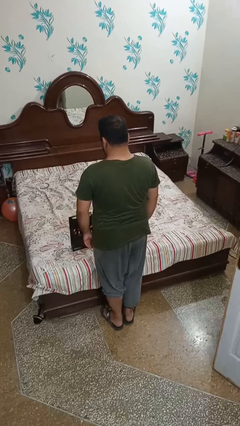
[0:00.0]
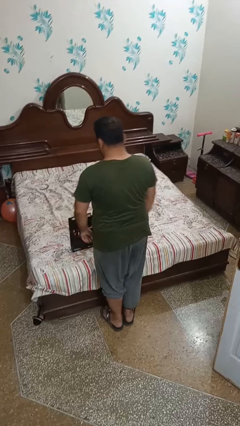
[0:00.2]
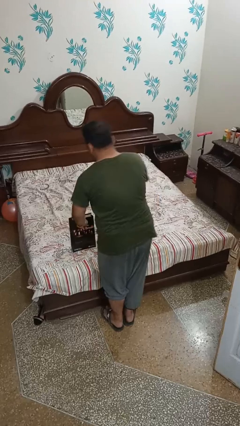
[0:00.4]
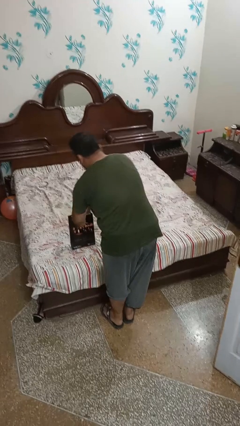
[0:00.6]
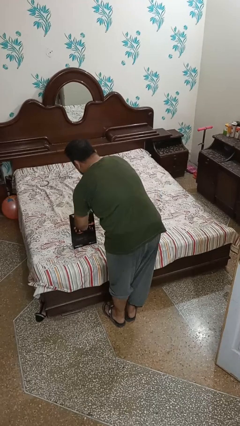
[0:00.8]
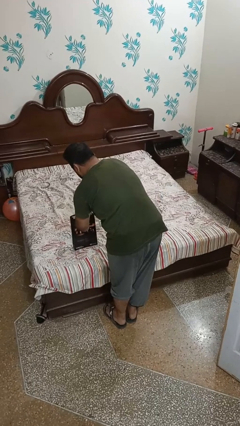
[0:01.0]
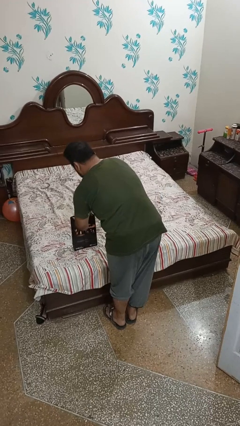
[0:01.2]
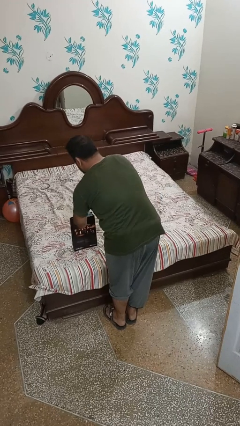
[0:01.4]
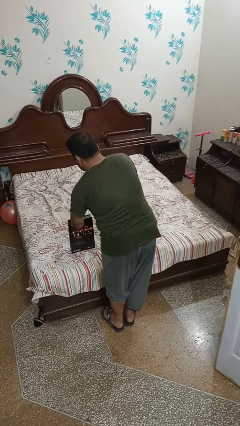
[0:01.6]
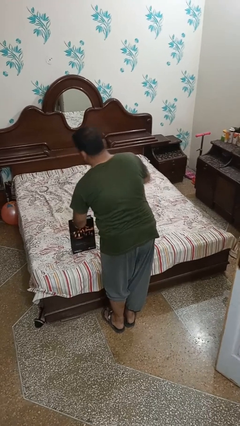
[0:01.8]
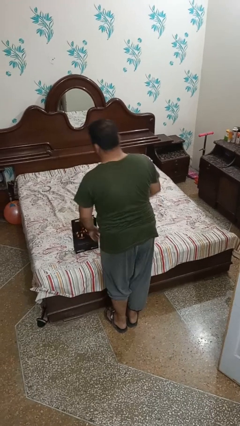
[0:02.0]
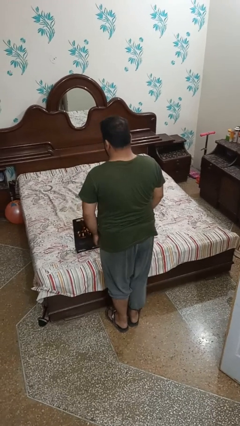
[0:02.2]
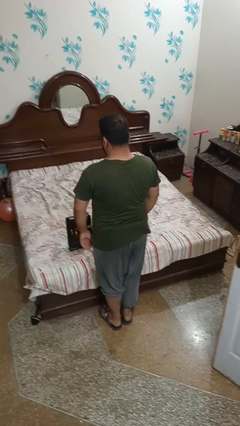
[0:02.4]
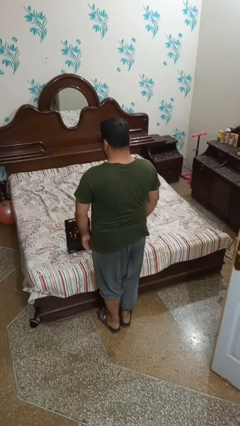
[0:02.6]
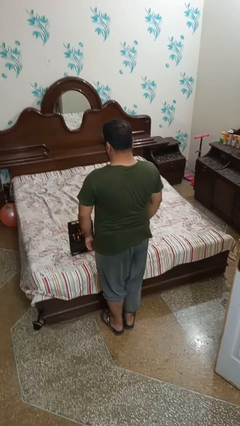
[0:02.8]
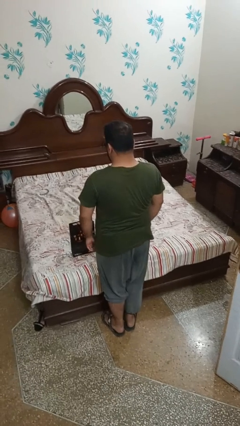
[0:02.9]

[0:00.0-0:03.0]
person takes object from bag

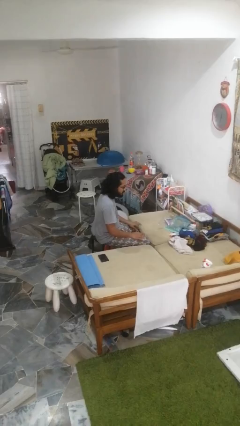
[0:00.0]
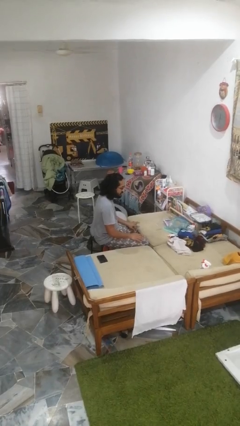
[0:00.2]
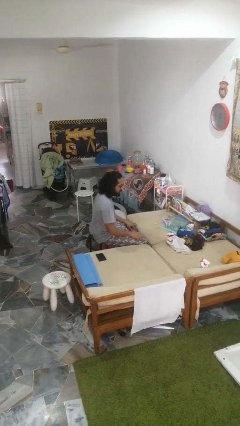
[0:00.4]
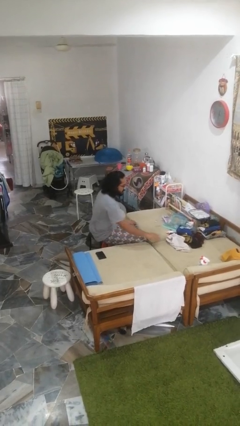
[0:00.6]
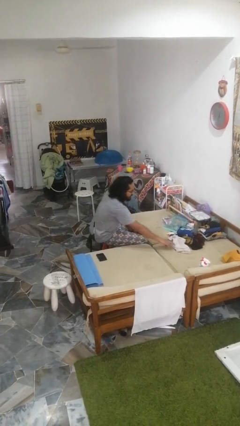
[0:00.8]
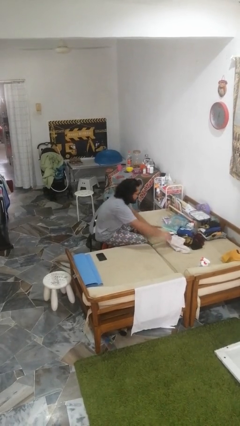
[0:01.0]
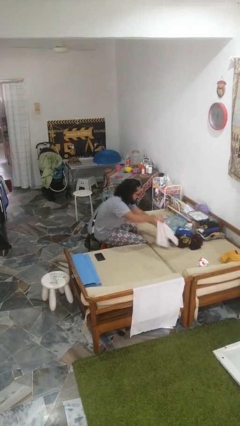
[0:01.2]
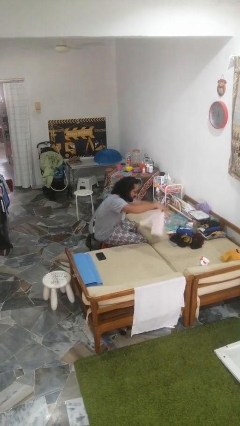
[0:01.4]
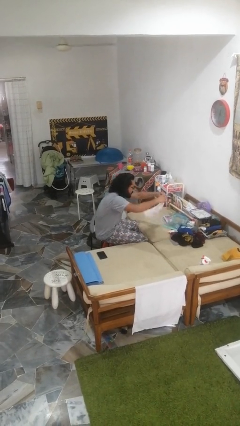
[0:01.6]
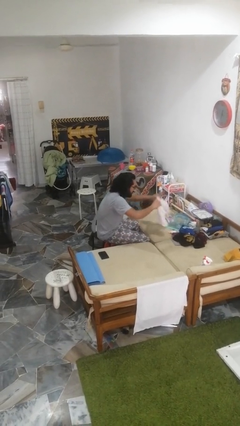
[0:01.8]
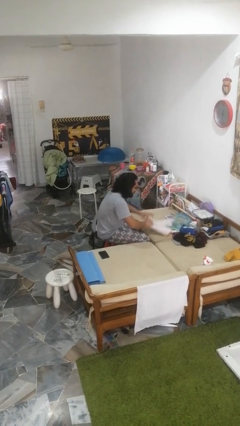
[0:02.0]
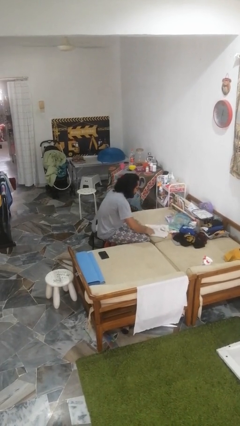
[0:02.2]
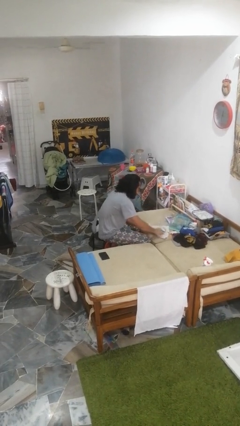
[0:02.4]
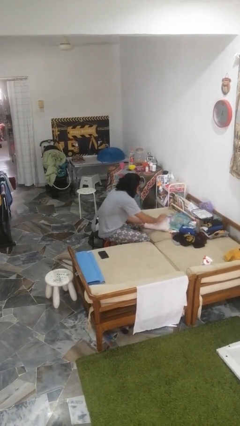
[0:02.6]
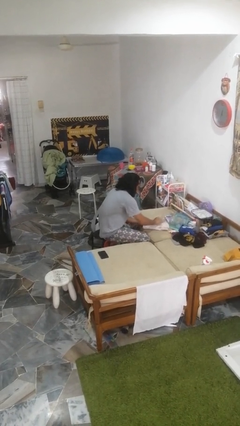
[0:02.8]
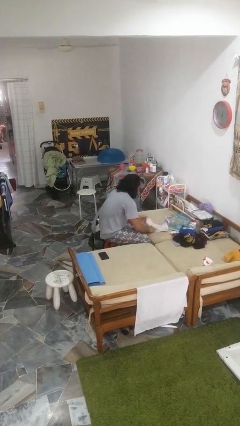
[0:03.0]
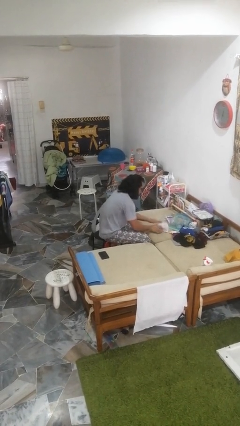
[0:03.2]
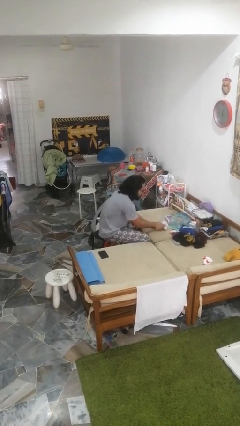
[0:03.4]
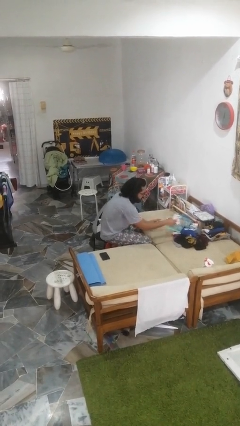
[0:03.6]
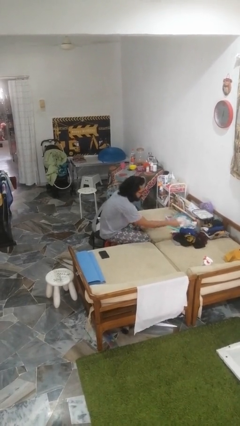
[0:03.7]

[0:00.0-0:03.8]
person folds pants

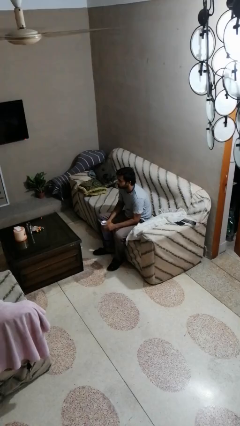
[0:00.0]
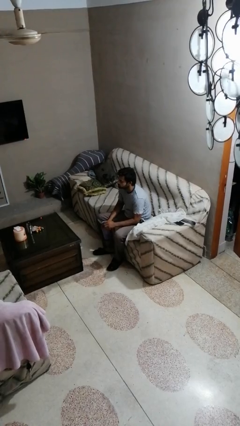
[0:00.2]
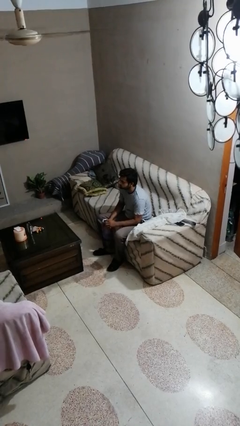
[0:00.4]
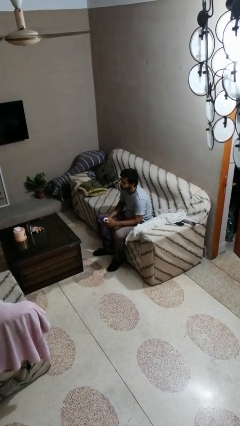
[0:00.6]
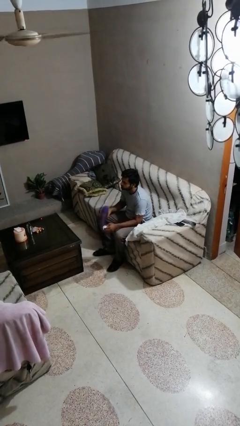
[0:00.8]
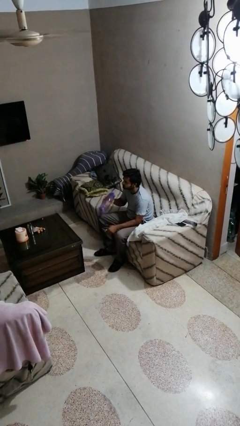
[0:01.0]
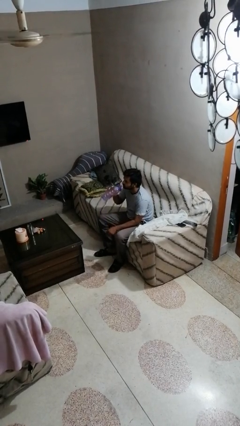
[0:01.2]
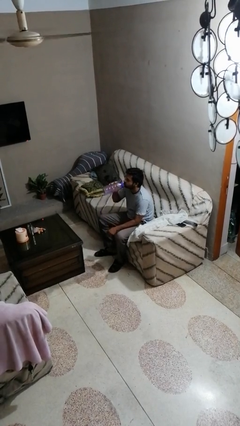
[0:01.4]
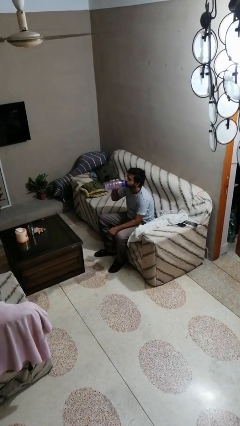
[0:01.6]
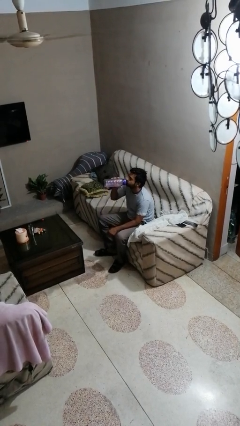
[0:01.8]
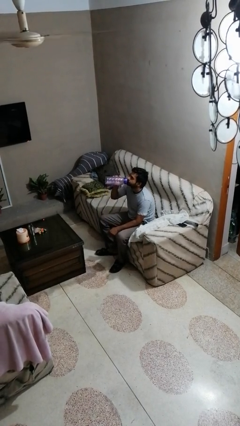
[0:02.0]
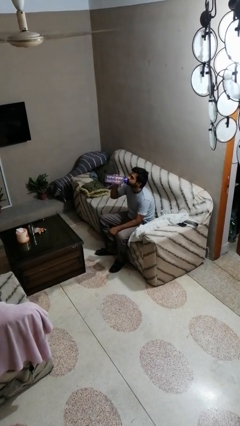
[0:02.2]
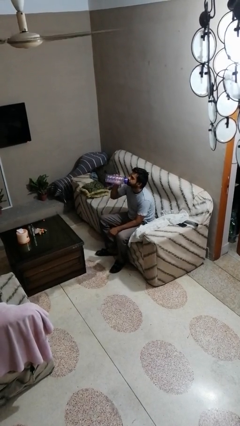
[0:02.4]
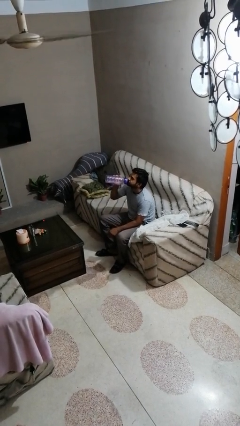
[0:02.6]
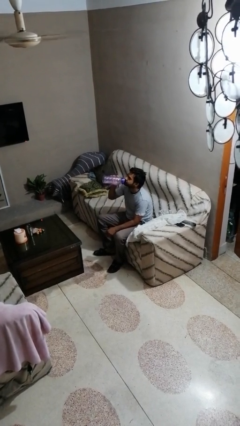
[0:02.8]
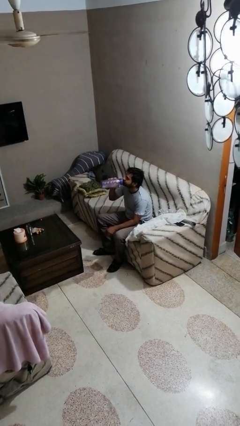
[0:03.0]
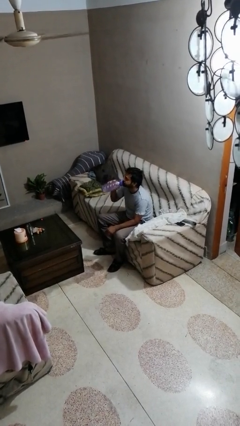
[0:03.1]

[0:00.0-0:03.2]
person drinks from bottle

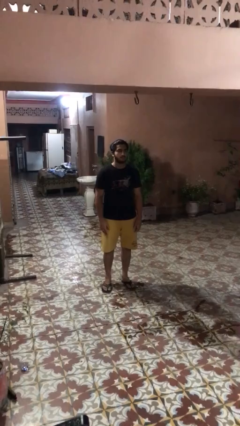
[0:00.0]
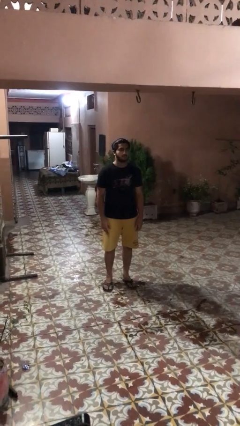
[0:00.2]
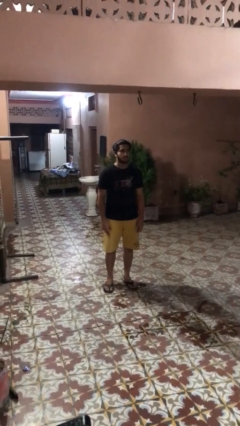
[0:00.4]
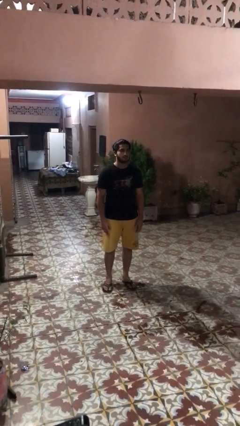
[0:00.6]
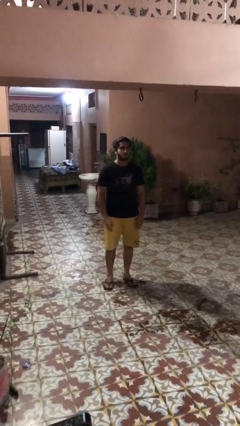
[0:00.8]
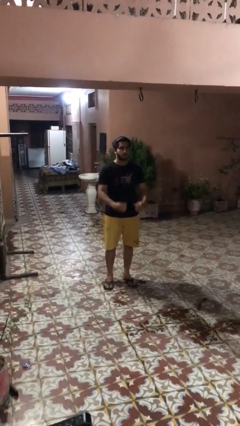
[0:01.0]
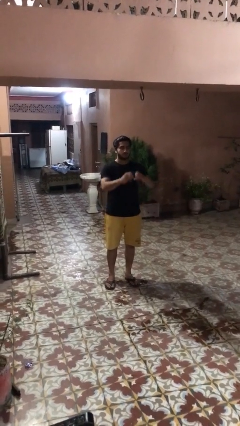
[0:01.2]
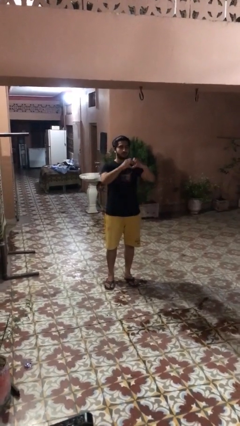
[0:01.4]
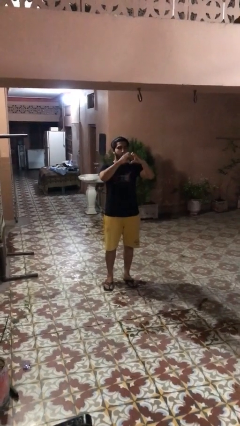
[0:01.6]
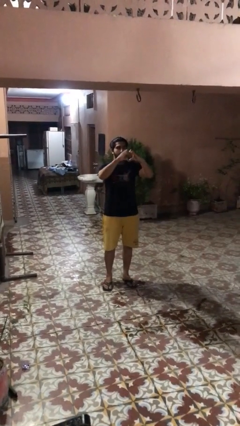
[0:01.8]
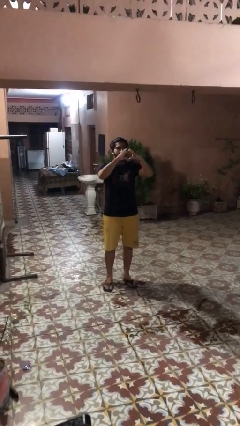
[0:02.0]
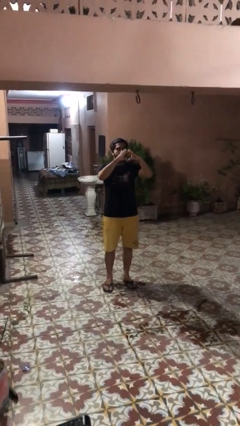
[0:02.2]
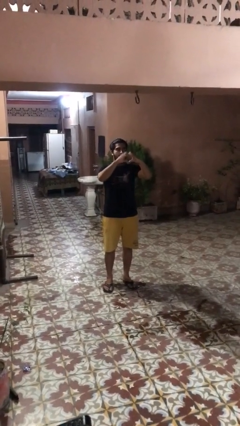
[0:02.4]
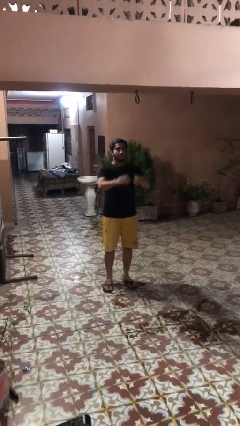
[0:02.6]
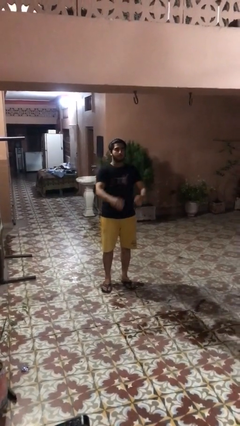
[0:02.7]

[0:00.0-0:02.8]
person gestures heart

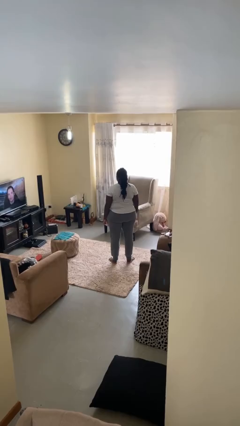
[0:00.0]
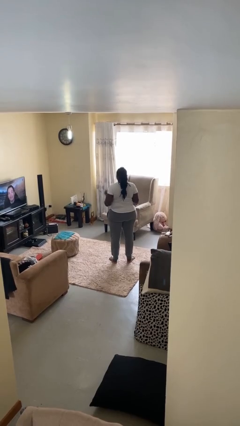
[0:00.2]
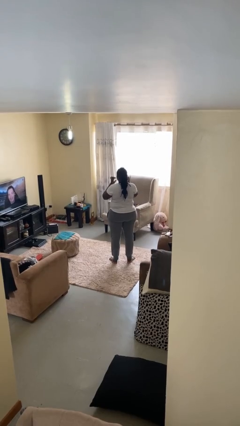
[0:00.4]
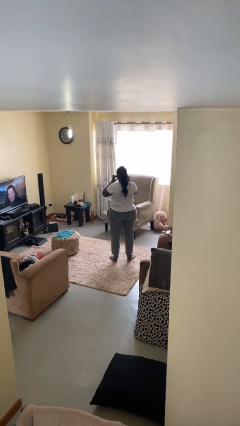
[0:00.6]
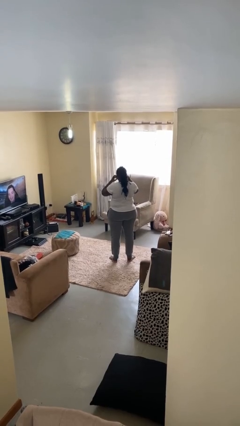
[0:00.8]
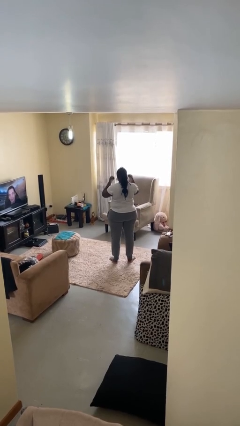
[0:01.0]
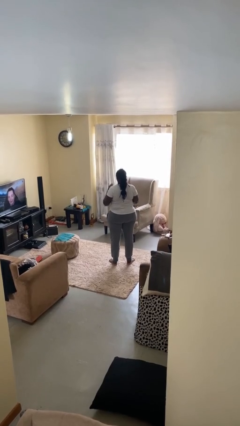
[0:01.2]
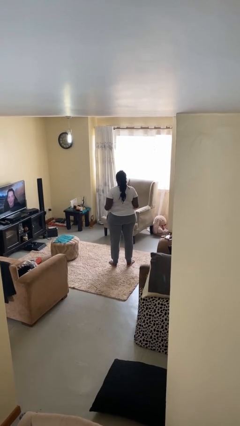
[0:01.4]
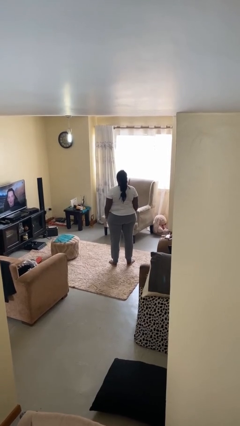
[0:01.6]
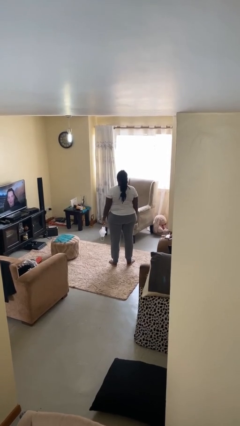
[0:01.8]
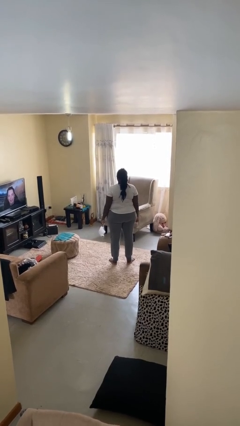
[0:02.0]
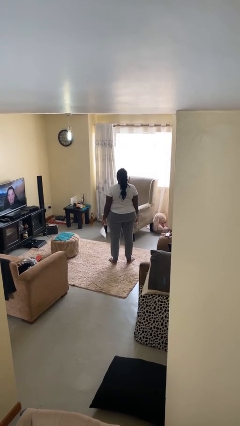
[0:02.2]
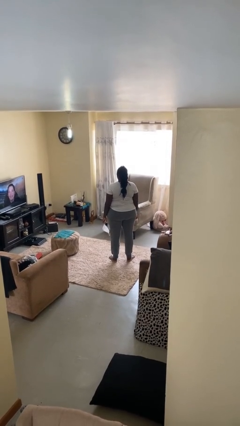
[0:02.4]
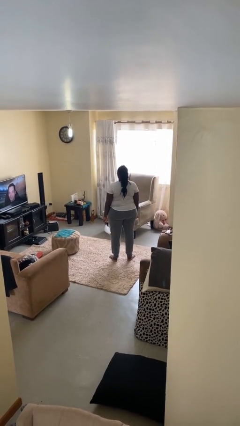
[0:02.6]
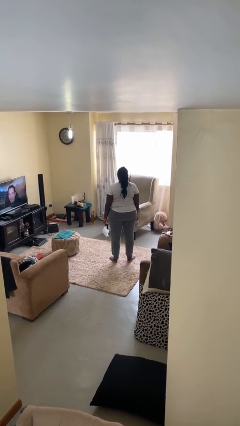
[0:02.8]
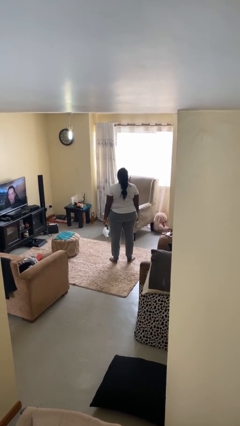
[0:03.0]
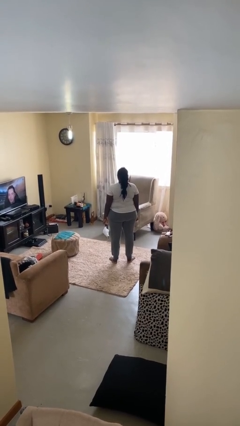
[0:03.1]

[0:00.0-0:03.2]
person takes off facemask

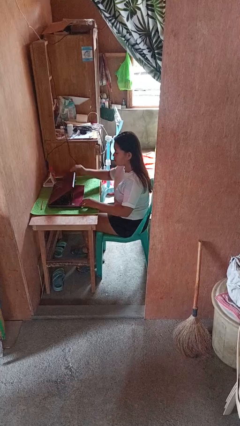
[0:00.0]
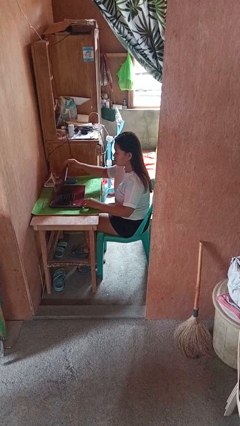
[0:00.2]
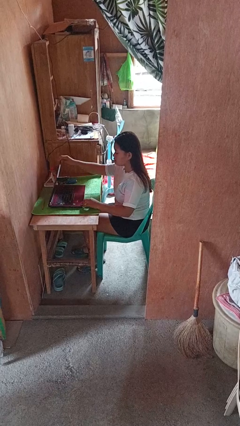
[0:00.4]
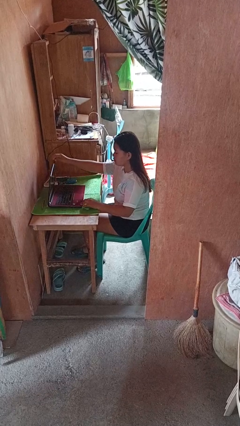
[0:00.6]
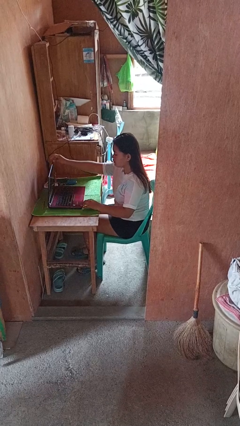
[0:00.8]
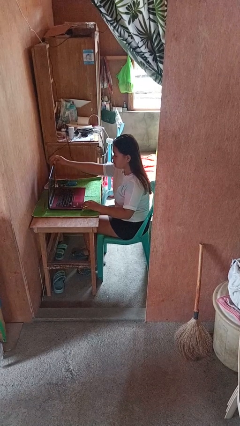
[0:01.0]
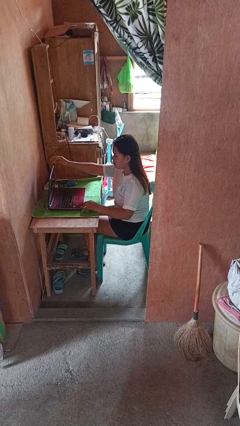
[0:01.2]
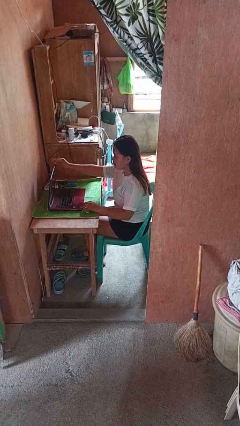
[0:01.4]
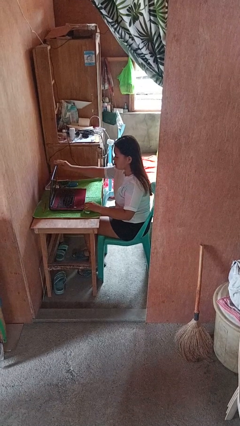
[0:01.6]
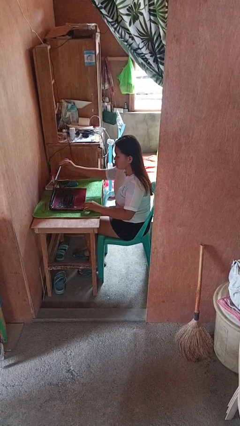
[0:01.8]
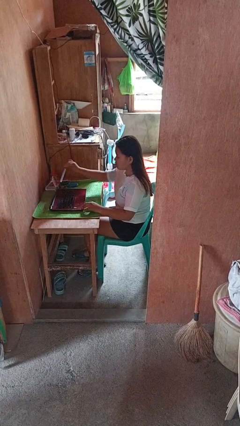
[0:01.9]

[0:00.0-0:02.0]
person opens laptop
